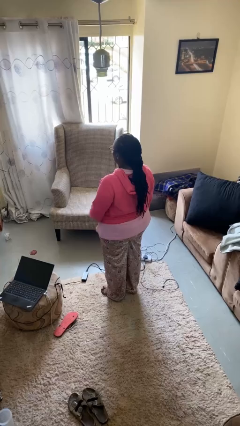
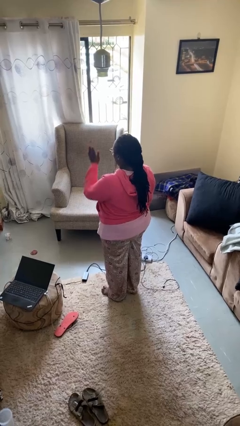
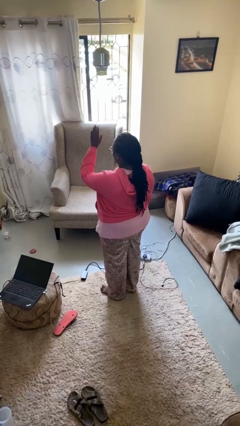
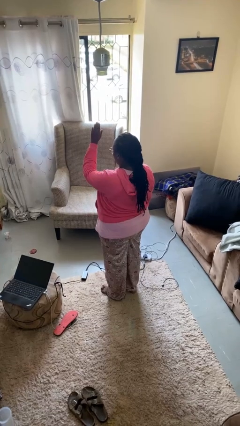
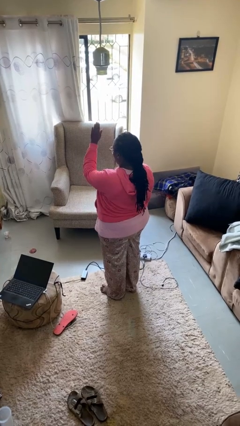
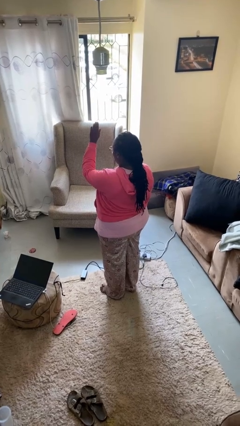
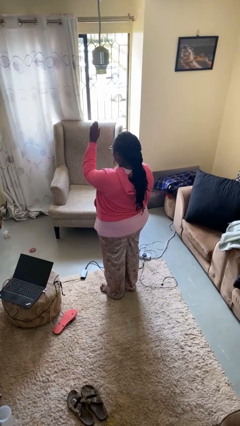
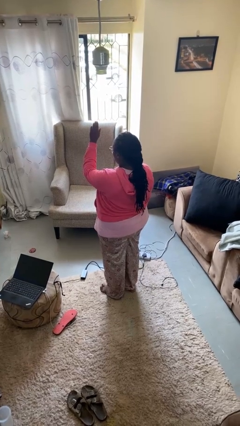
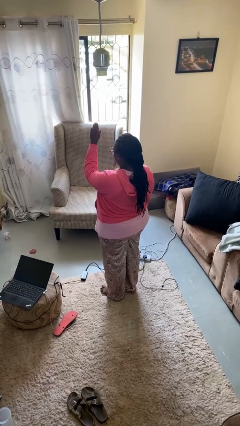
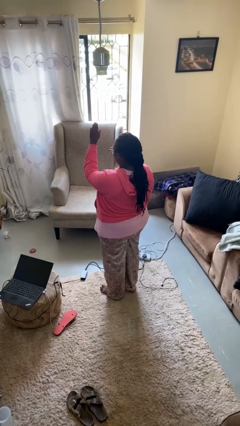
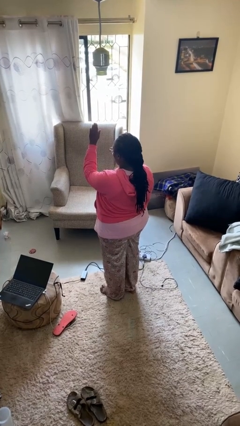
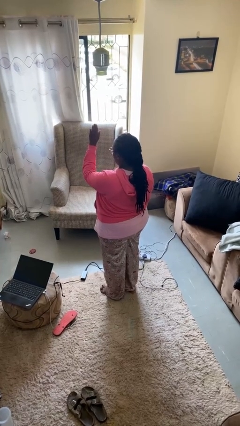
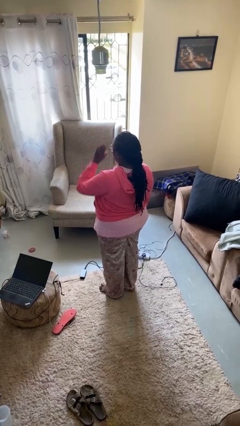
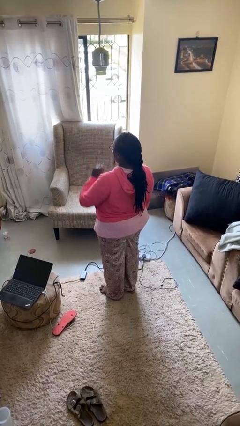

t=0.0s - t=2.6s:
person gestures stop

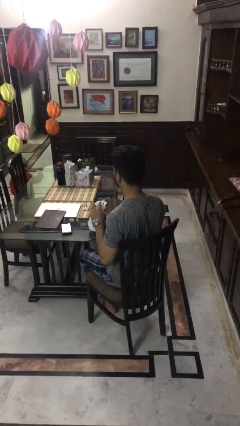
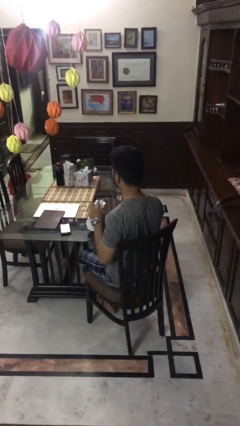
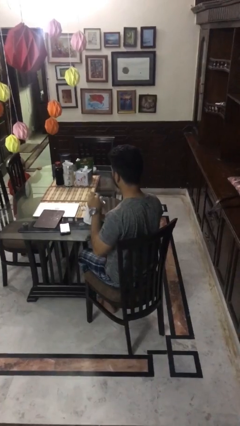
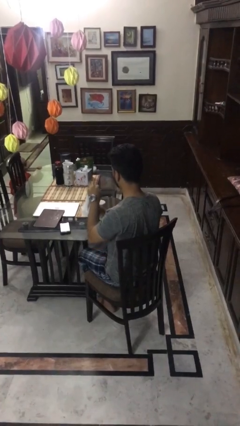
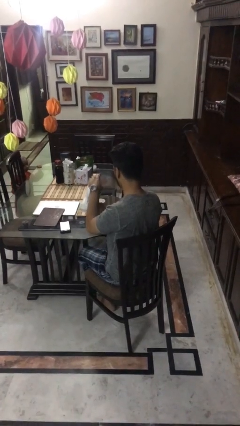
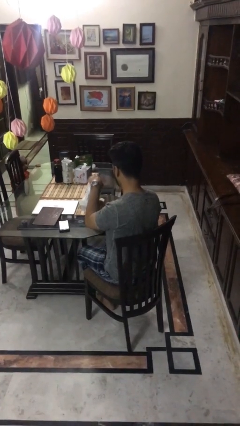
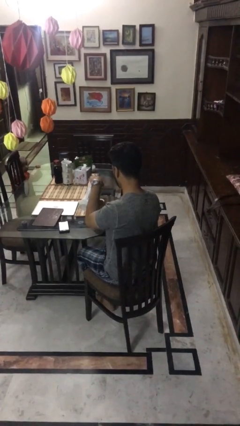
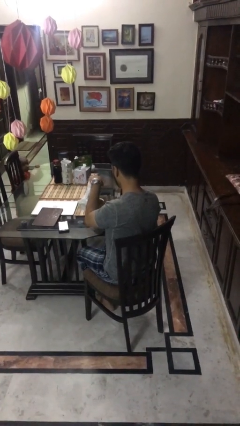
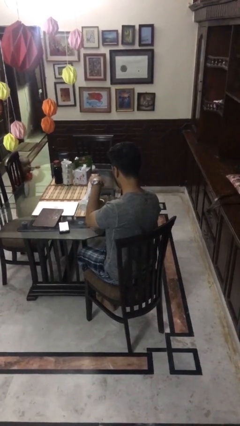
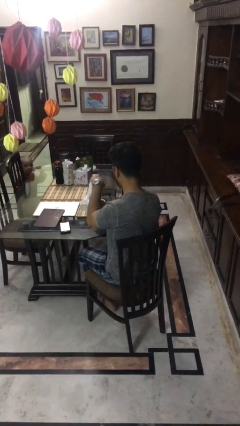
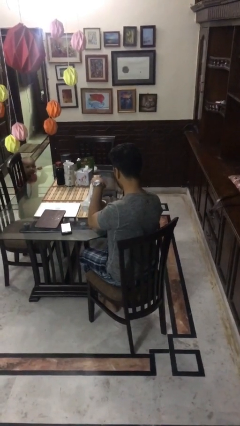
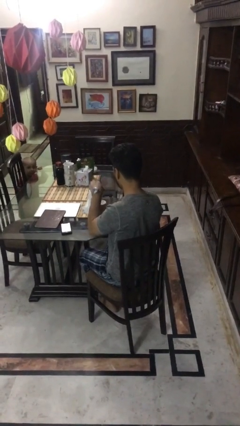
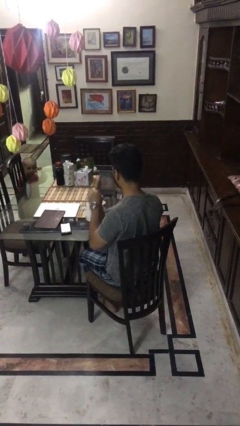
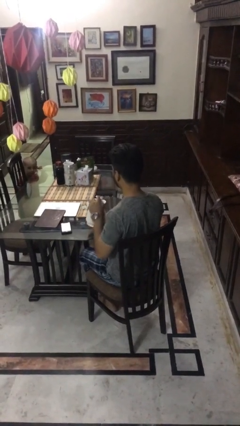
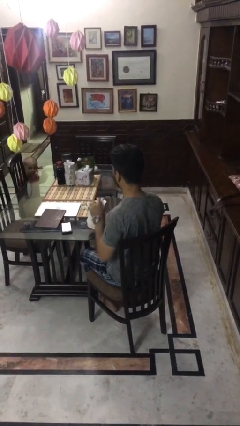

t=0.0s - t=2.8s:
person pours coffee into mug

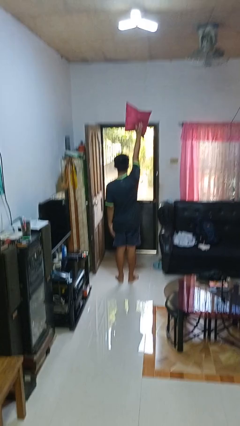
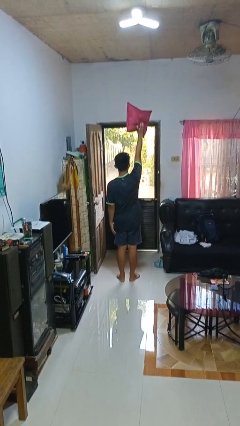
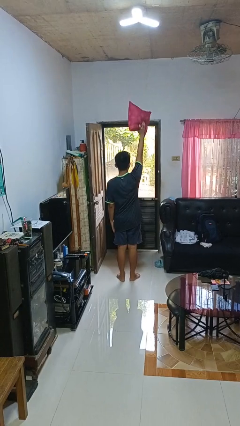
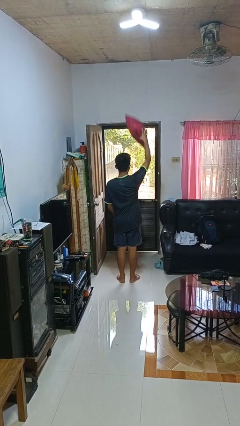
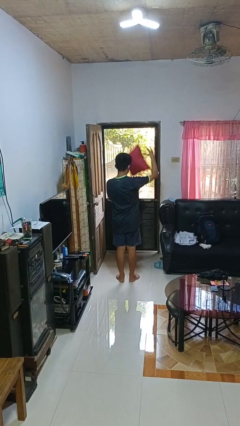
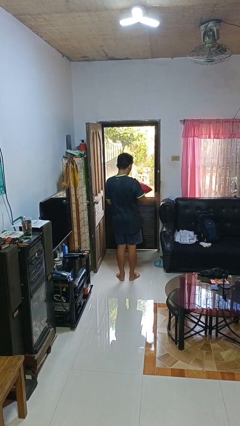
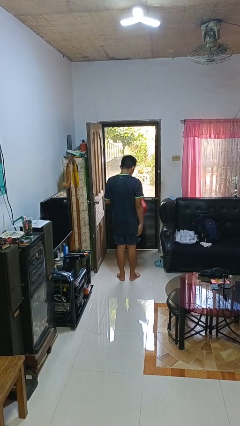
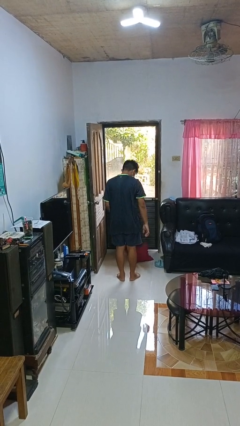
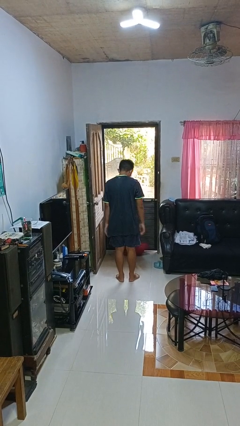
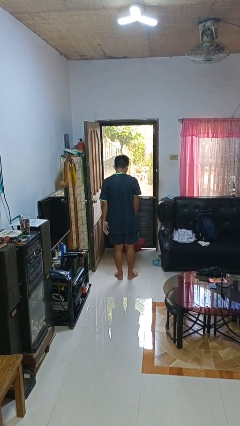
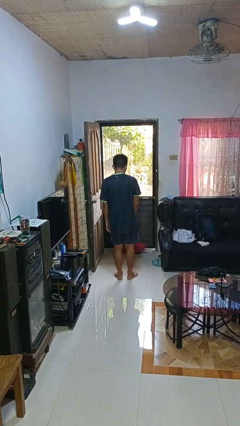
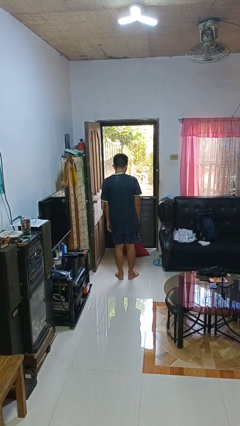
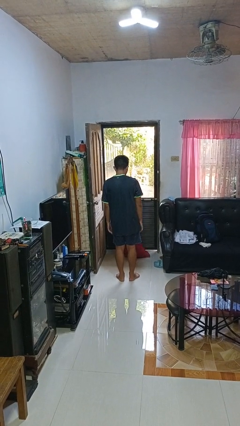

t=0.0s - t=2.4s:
person drops object

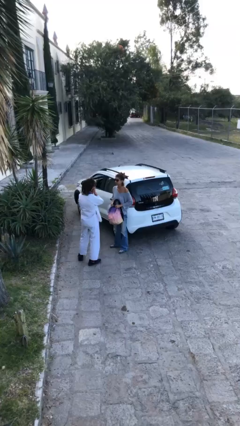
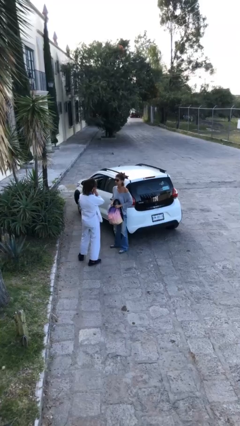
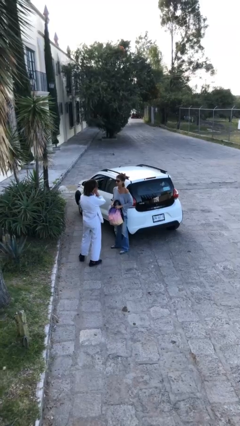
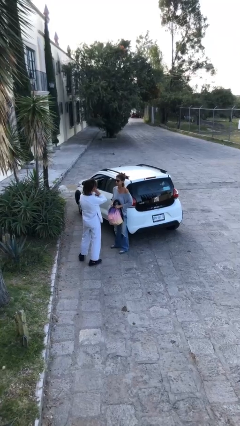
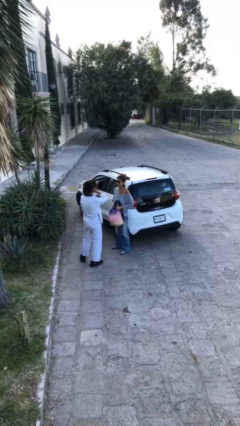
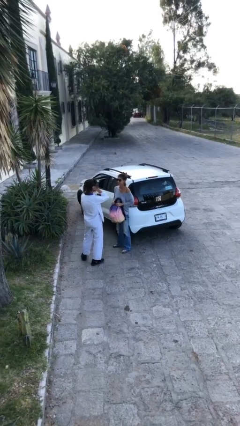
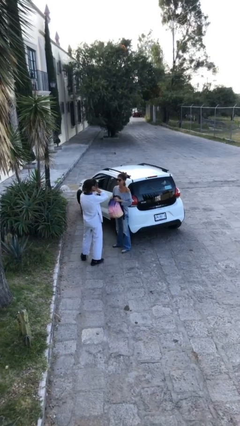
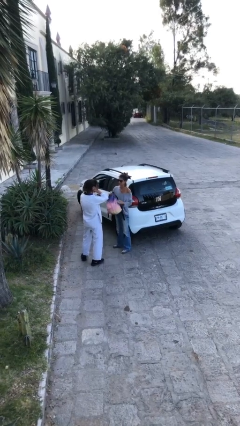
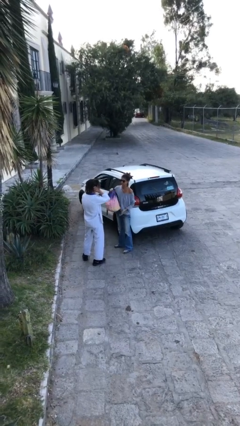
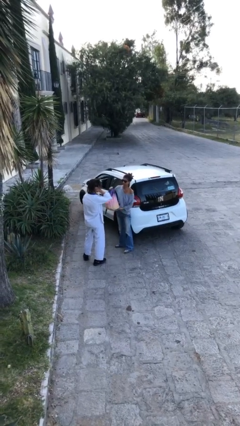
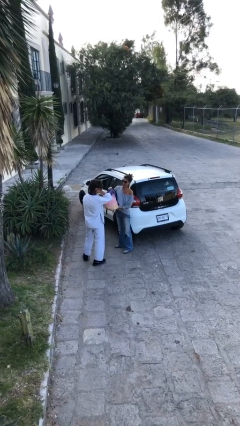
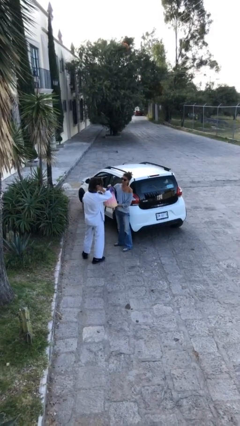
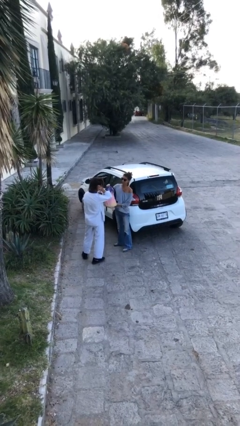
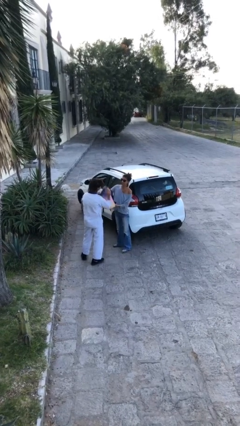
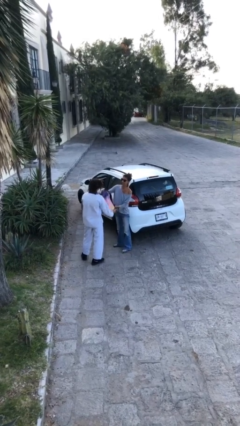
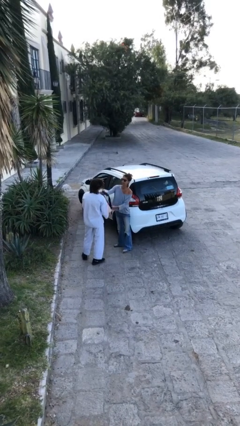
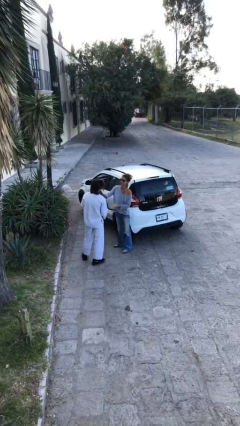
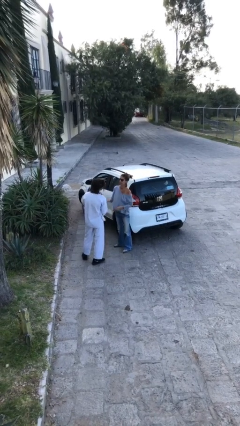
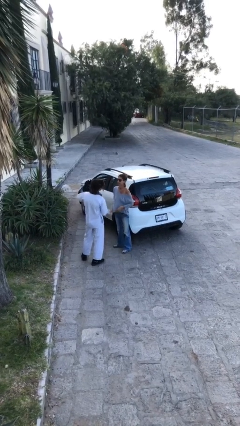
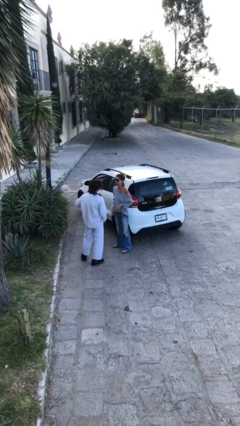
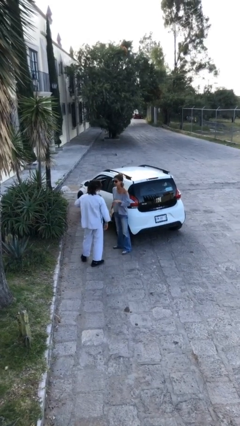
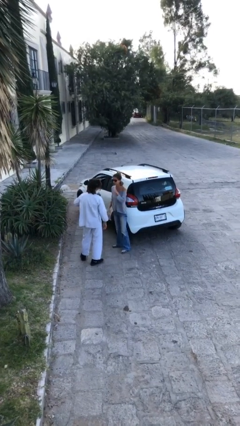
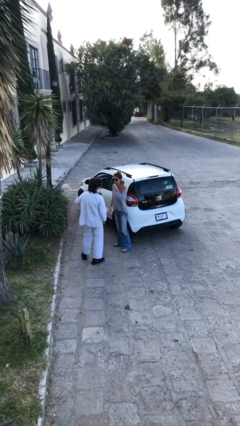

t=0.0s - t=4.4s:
person transfers object to person

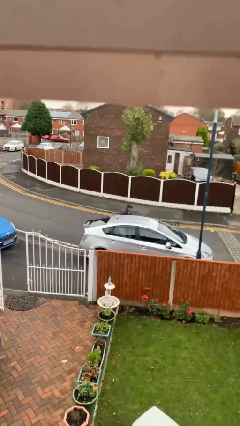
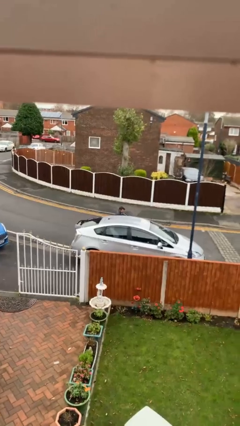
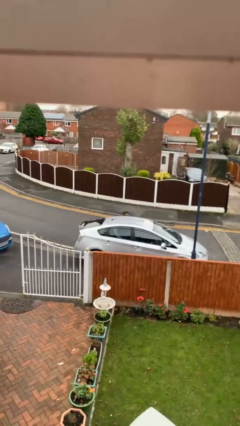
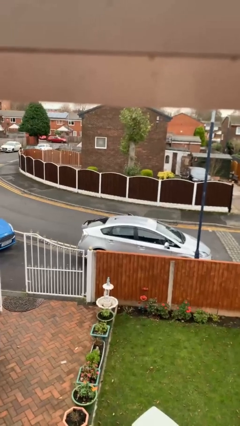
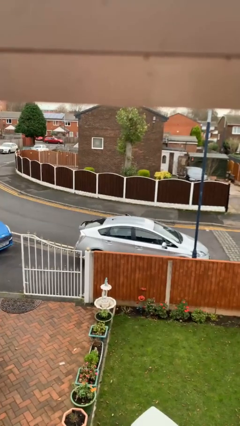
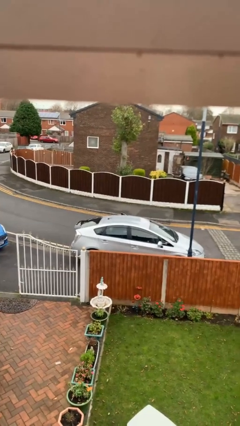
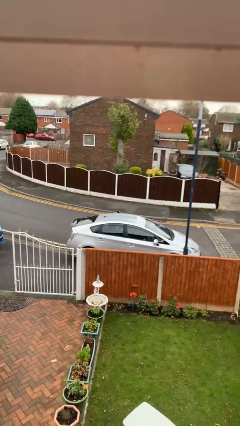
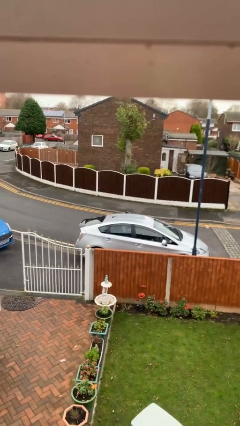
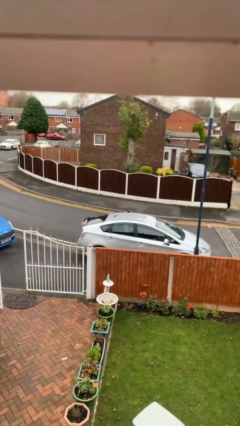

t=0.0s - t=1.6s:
person enters car

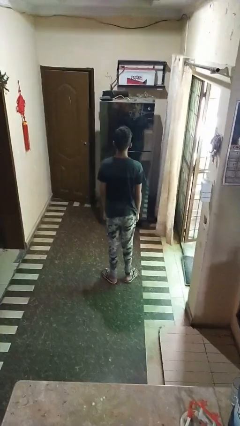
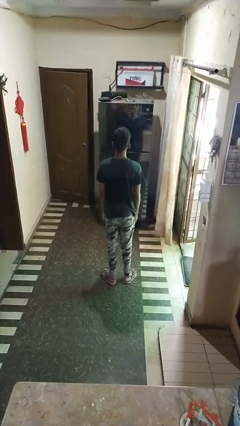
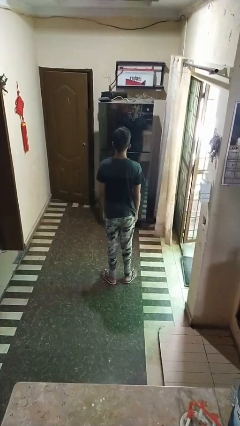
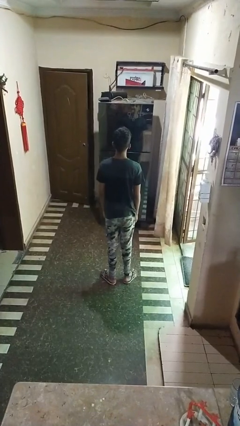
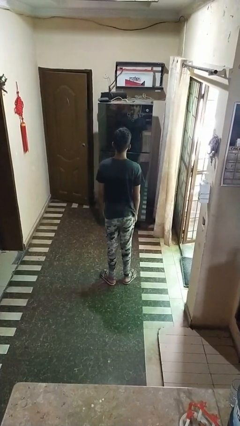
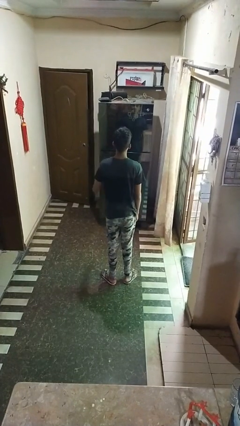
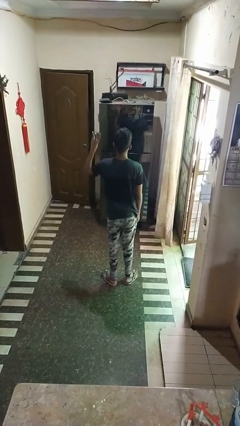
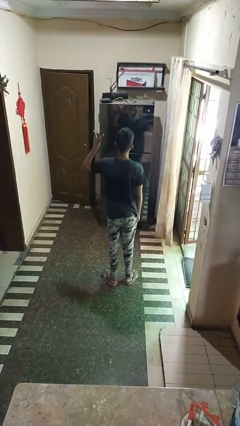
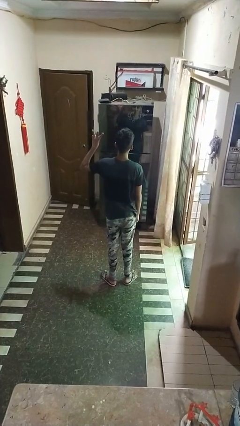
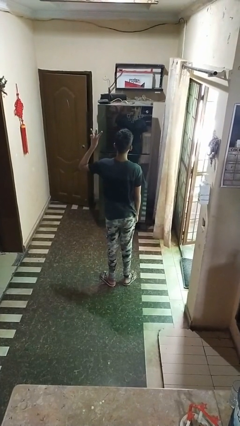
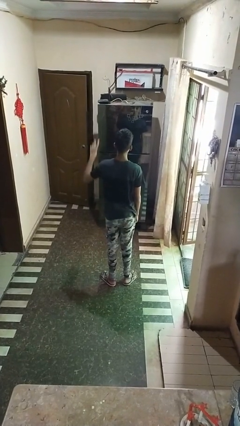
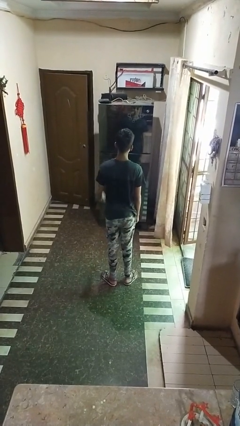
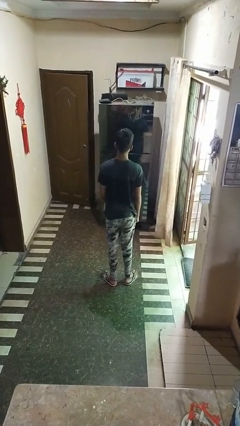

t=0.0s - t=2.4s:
person gestures number three

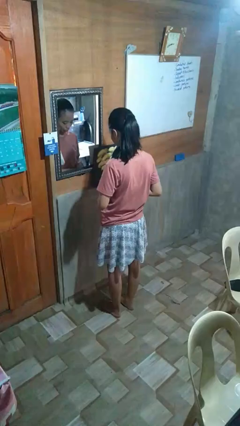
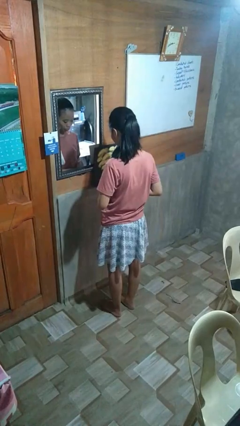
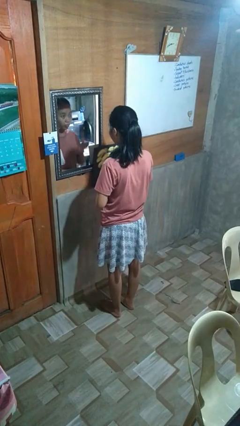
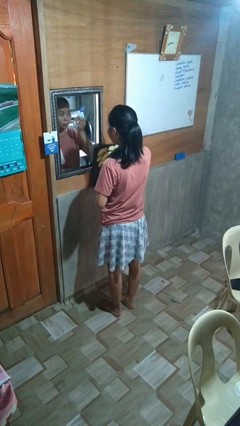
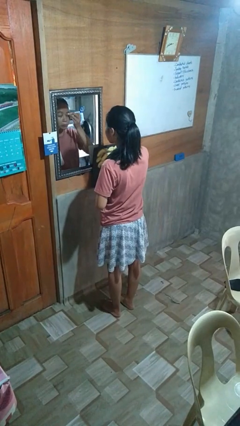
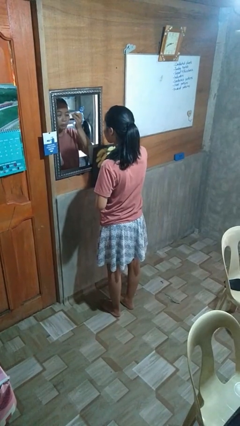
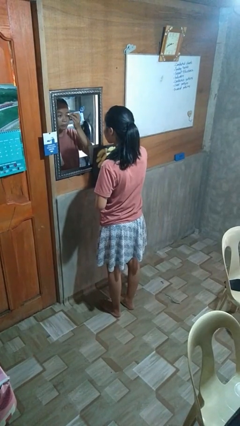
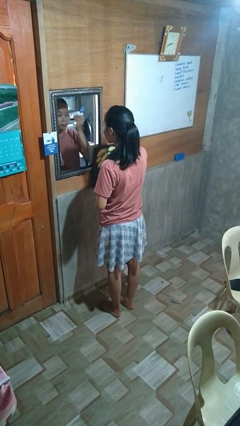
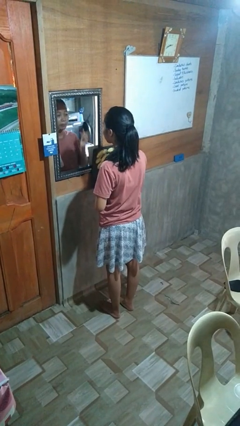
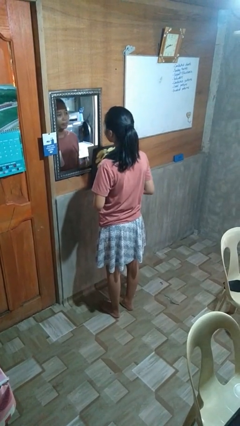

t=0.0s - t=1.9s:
person applies eye makeup
